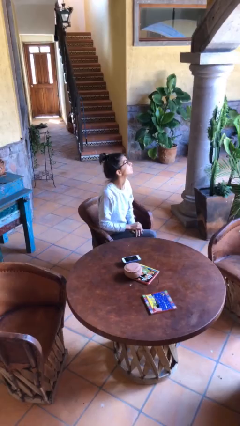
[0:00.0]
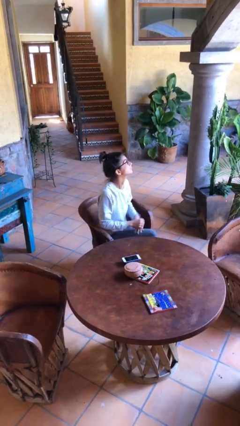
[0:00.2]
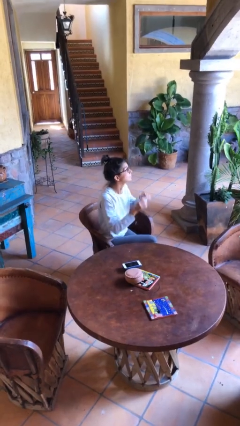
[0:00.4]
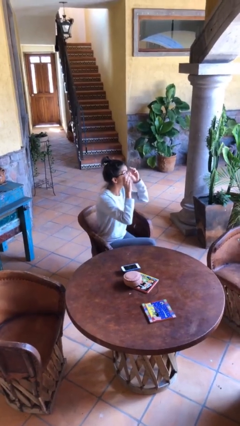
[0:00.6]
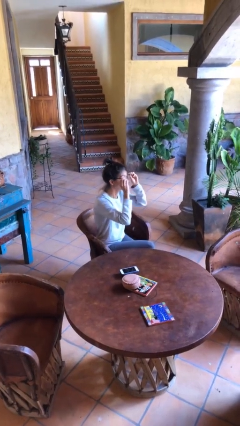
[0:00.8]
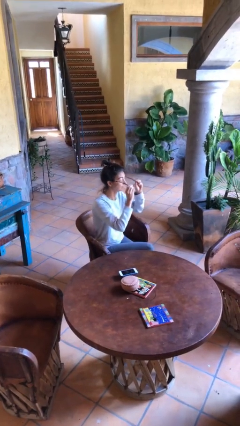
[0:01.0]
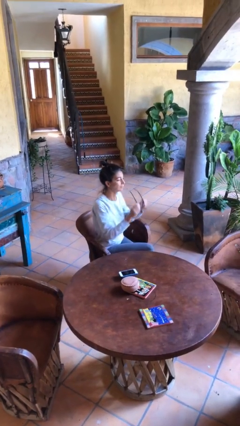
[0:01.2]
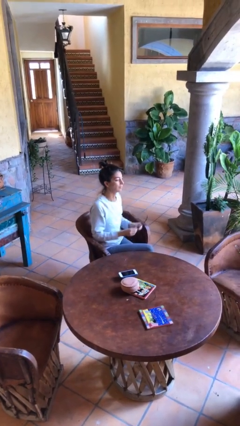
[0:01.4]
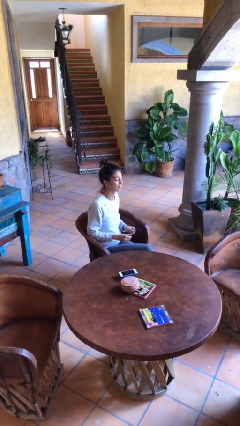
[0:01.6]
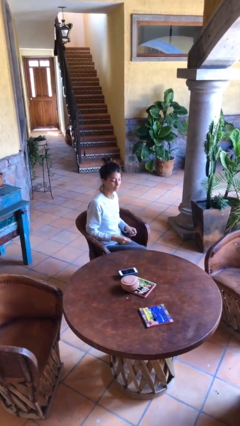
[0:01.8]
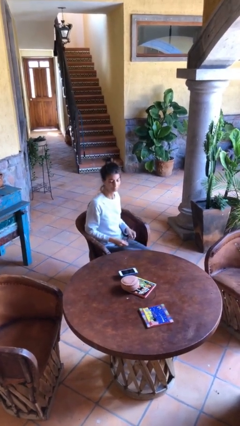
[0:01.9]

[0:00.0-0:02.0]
person takes off glasses

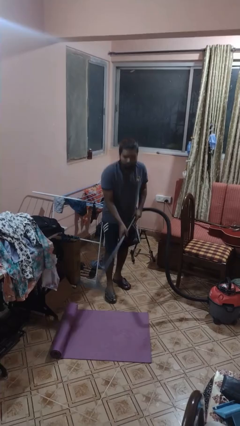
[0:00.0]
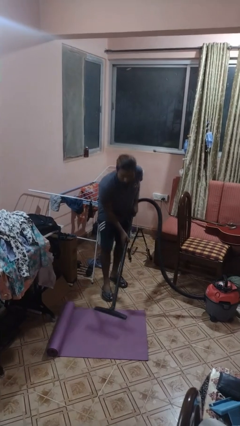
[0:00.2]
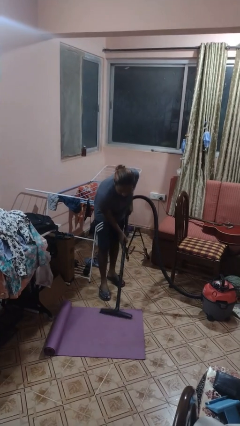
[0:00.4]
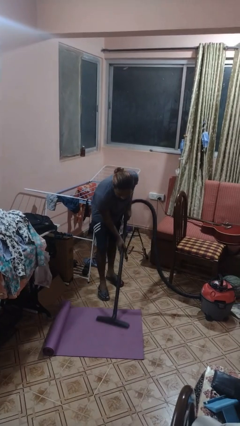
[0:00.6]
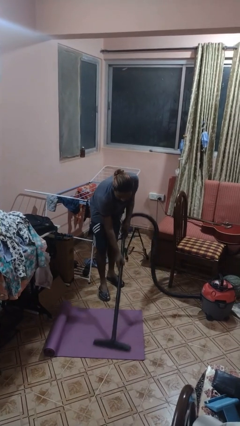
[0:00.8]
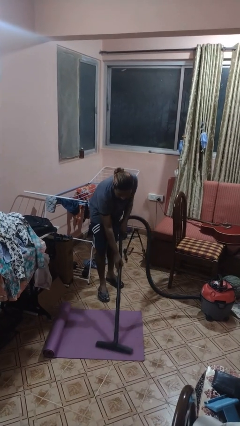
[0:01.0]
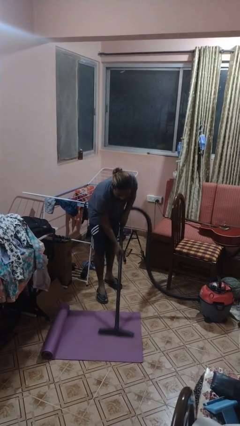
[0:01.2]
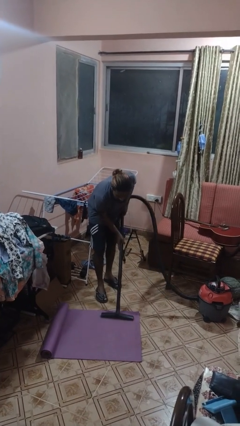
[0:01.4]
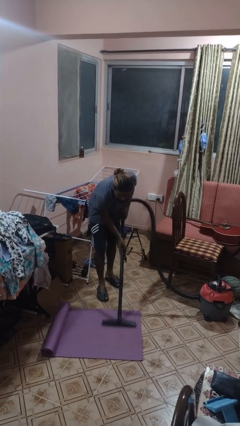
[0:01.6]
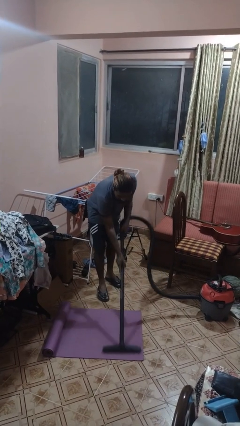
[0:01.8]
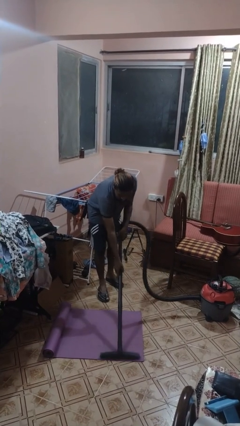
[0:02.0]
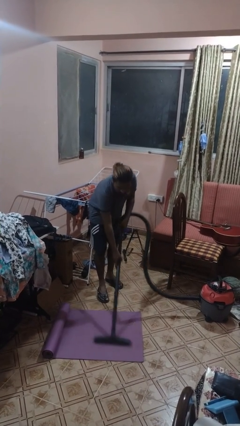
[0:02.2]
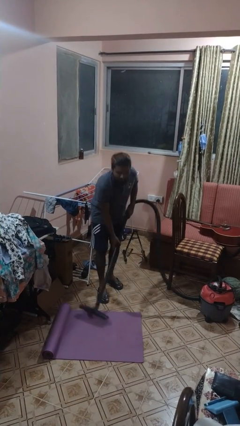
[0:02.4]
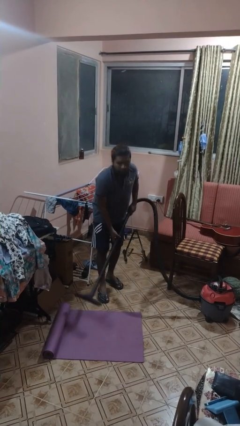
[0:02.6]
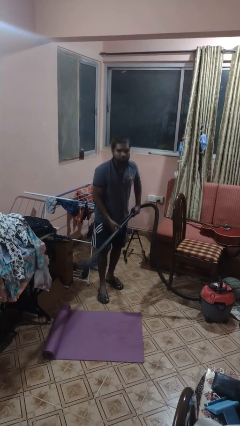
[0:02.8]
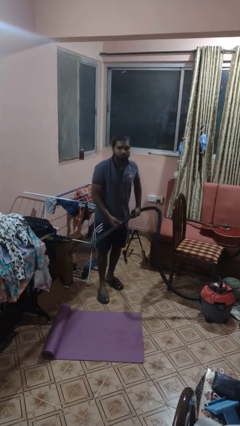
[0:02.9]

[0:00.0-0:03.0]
person vacuums carpet

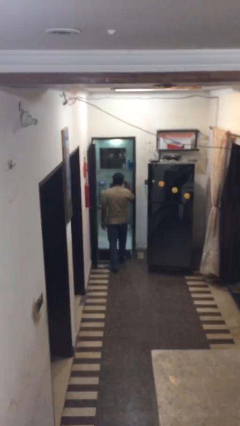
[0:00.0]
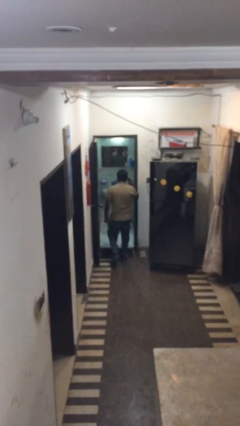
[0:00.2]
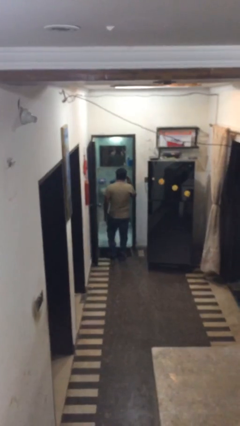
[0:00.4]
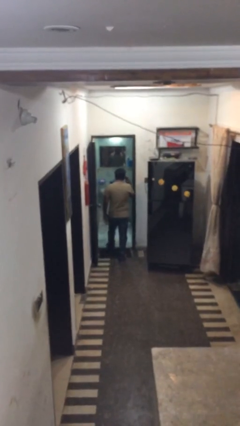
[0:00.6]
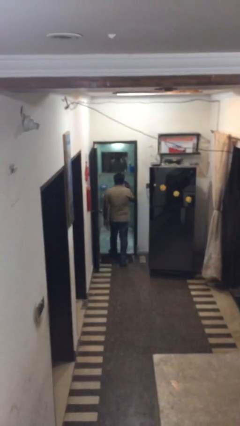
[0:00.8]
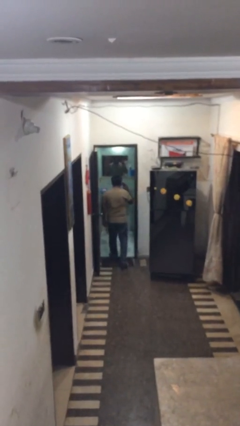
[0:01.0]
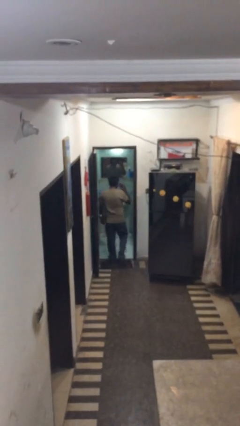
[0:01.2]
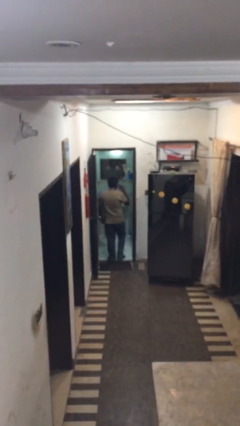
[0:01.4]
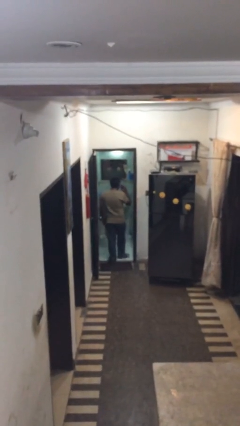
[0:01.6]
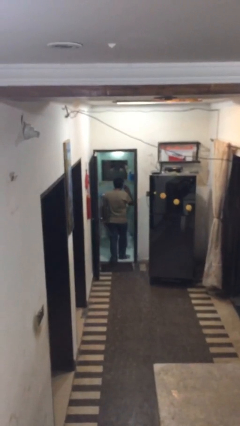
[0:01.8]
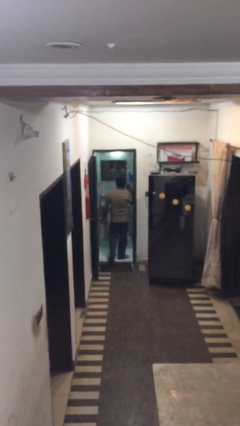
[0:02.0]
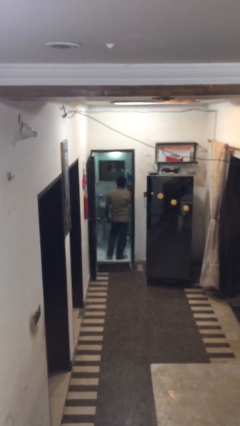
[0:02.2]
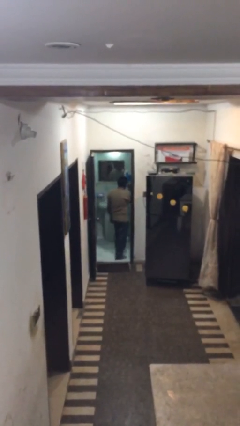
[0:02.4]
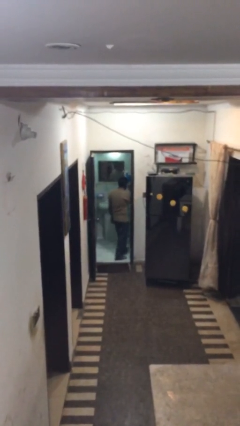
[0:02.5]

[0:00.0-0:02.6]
person exits scene through structure

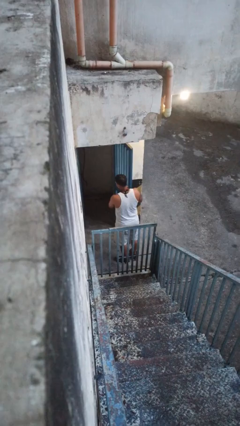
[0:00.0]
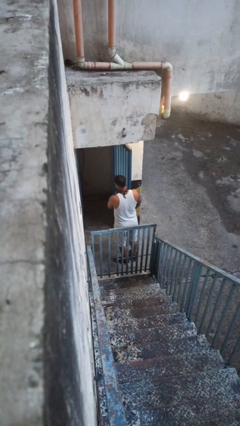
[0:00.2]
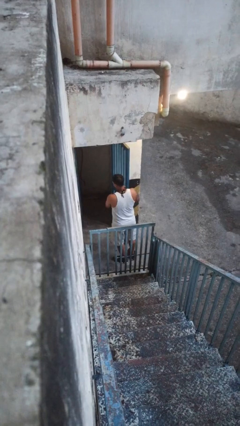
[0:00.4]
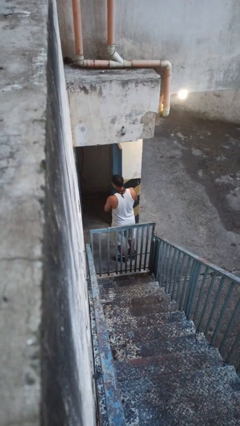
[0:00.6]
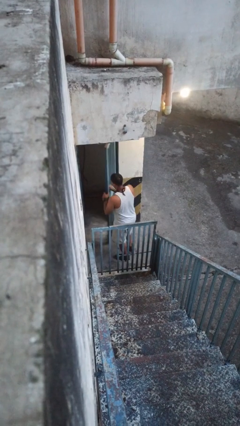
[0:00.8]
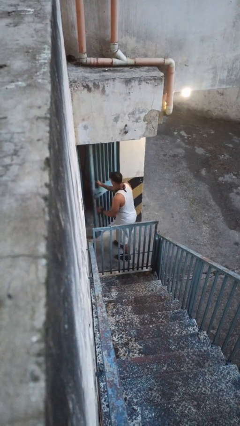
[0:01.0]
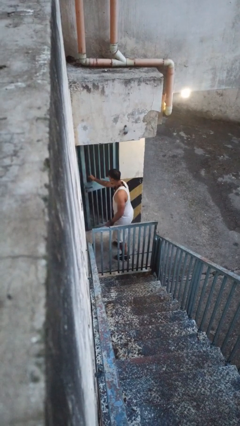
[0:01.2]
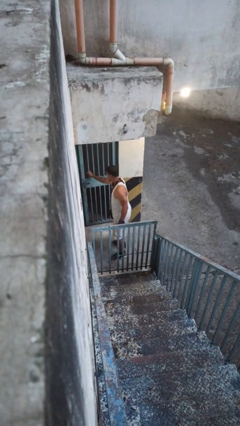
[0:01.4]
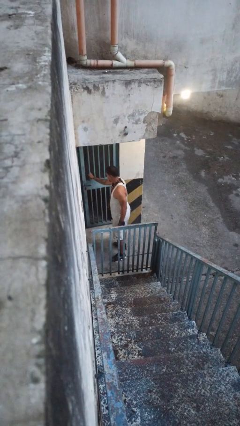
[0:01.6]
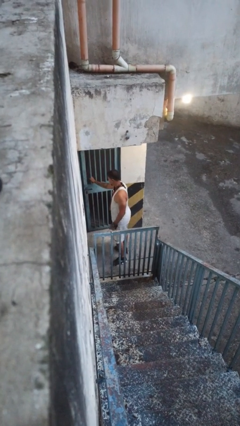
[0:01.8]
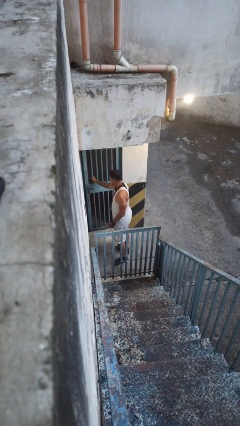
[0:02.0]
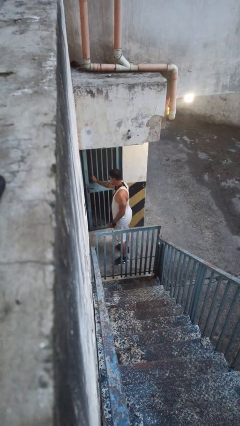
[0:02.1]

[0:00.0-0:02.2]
person closes facility door

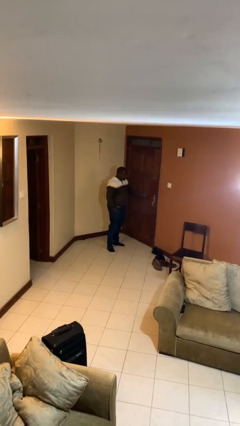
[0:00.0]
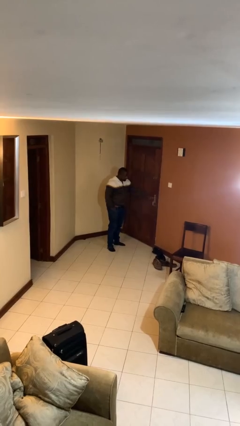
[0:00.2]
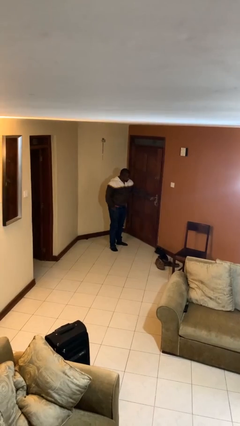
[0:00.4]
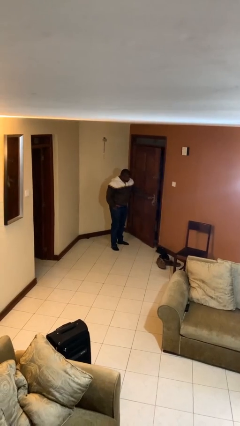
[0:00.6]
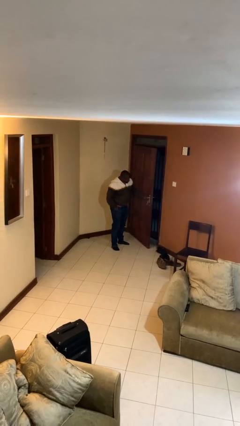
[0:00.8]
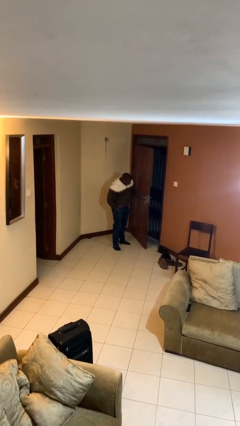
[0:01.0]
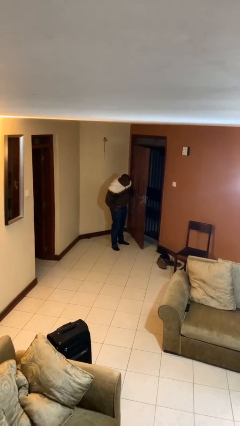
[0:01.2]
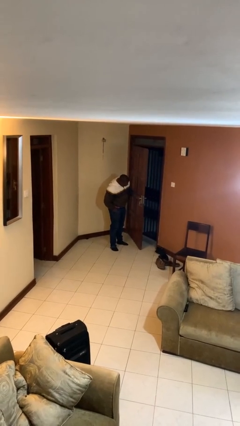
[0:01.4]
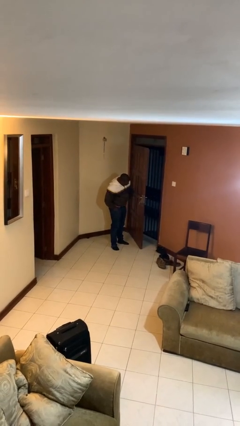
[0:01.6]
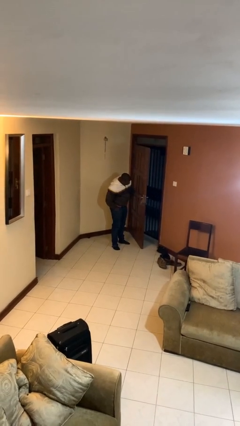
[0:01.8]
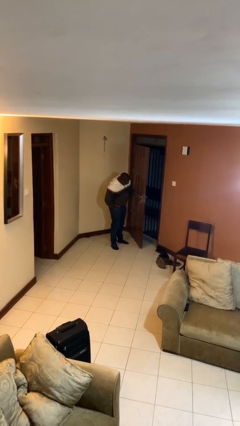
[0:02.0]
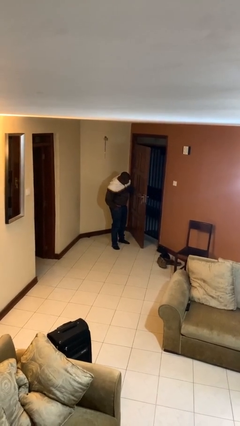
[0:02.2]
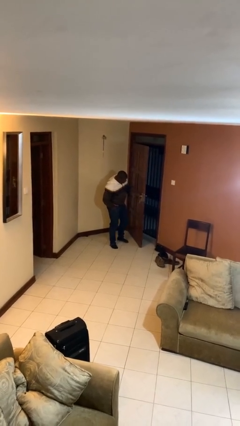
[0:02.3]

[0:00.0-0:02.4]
person opens facility door

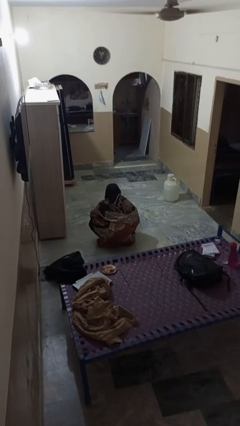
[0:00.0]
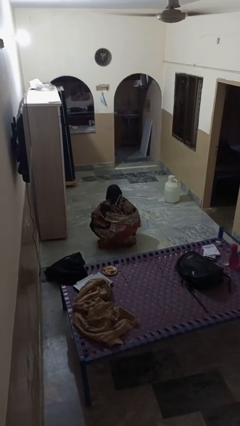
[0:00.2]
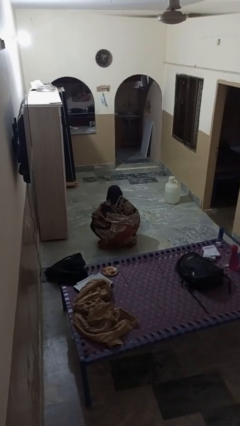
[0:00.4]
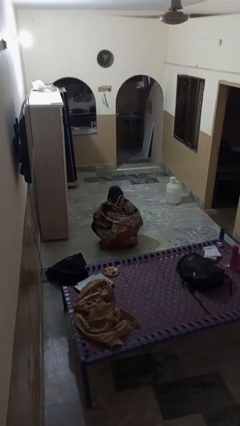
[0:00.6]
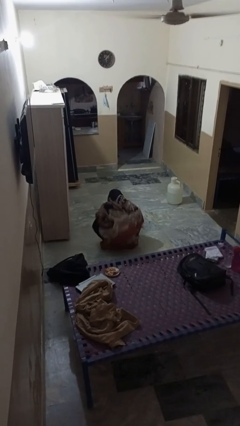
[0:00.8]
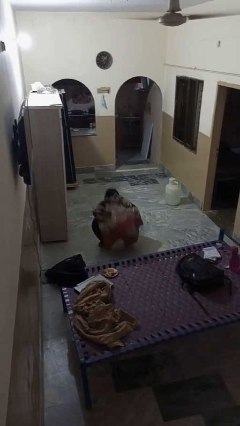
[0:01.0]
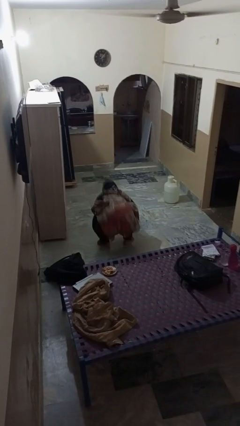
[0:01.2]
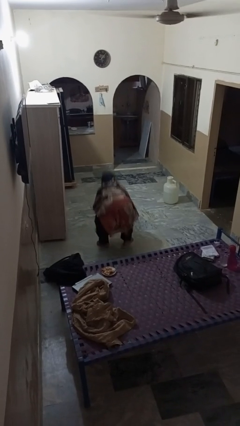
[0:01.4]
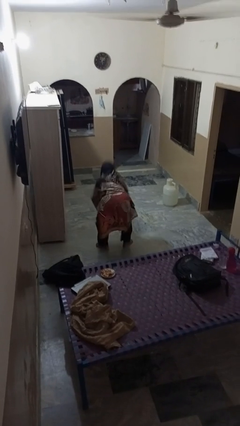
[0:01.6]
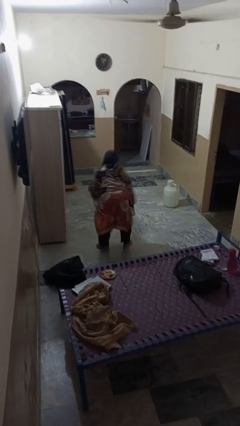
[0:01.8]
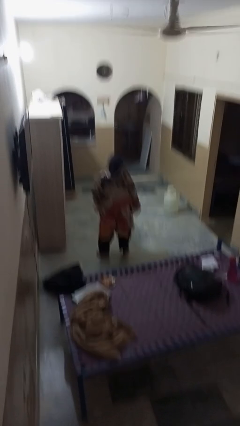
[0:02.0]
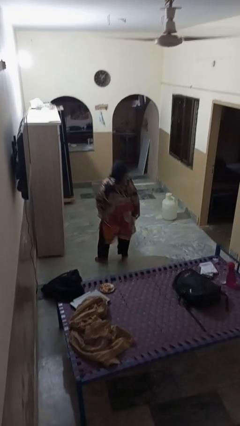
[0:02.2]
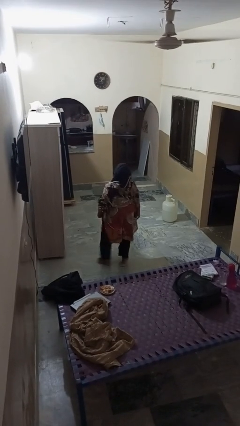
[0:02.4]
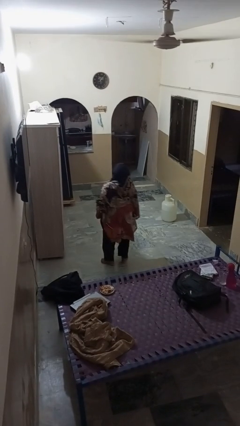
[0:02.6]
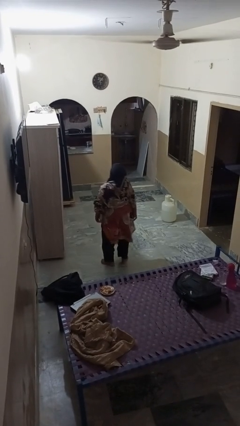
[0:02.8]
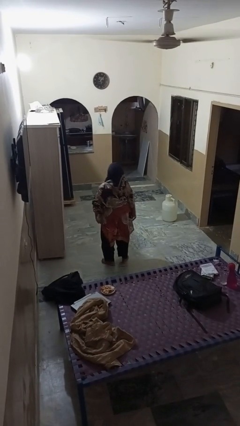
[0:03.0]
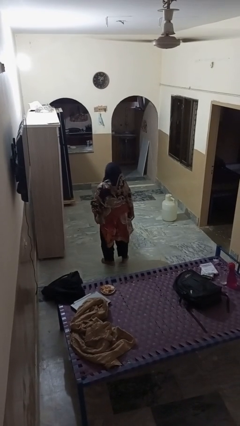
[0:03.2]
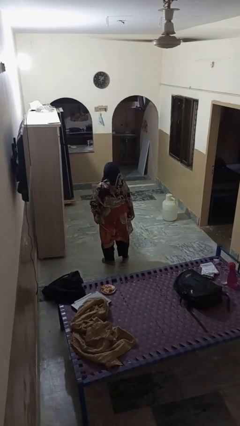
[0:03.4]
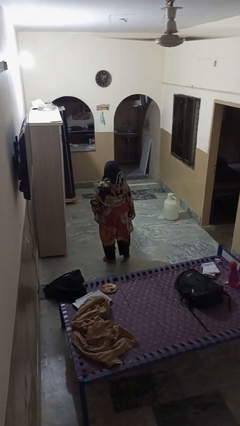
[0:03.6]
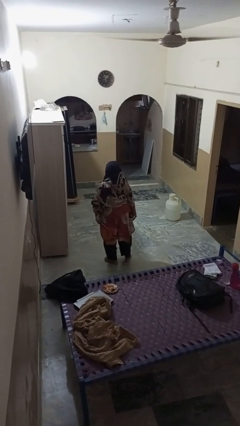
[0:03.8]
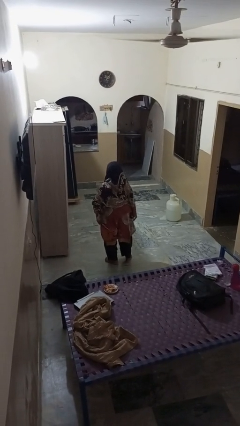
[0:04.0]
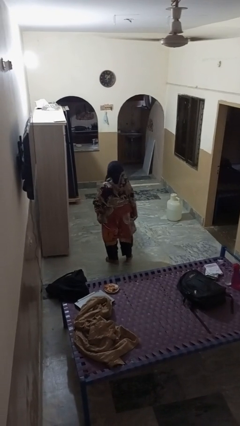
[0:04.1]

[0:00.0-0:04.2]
person stands up

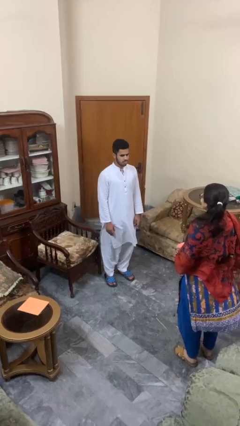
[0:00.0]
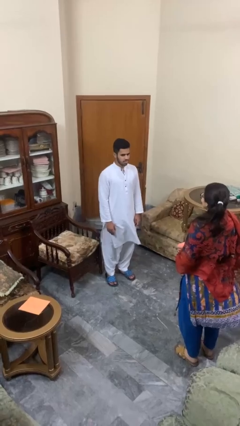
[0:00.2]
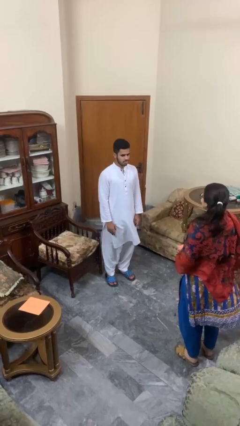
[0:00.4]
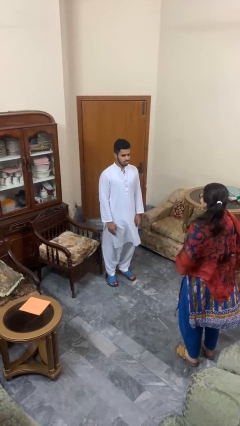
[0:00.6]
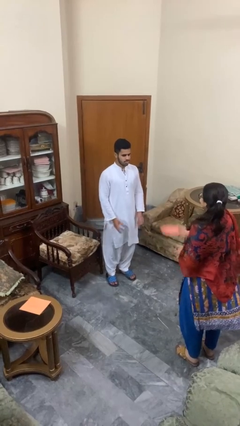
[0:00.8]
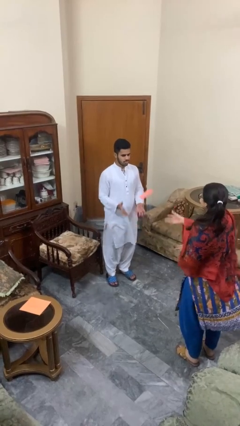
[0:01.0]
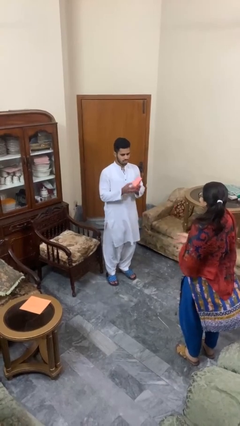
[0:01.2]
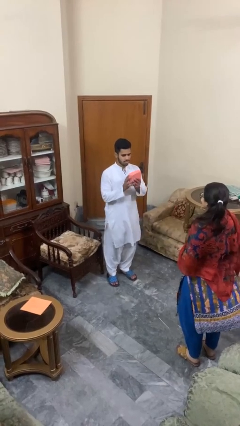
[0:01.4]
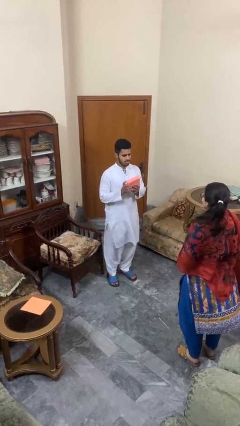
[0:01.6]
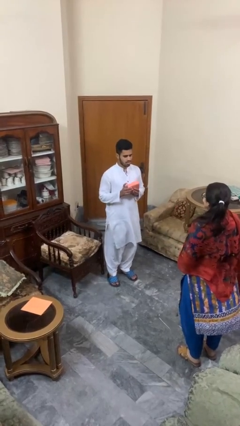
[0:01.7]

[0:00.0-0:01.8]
person catches object from person
